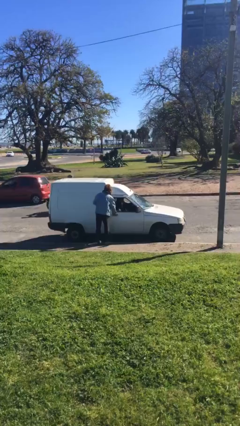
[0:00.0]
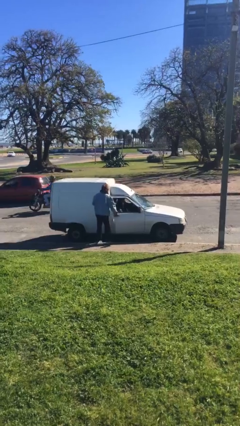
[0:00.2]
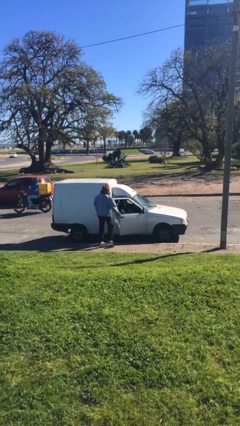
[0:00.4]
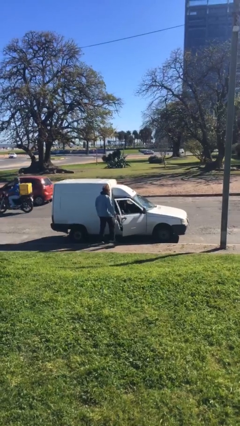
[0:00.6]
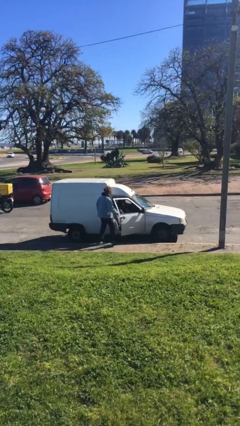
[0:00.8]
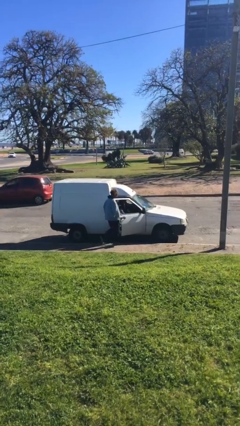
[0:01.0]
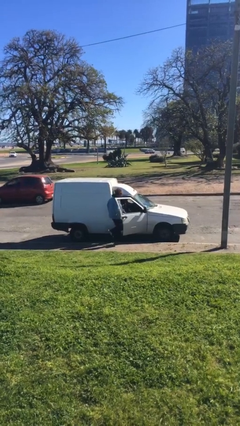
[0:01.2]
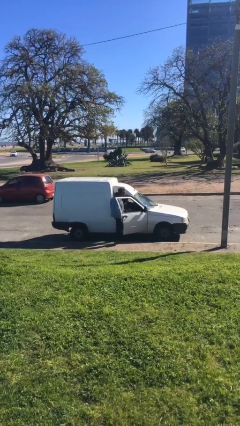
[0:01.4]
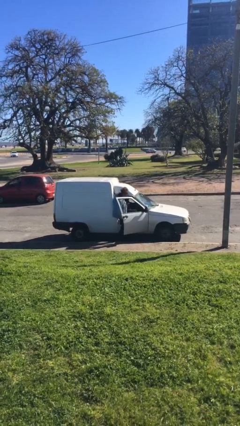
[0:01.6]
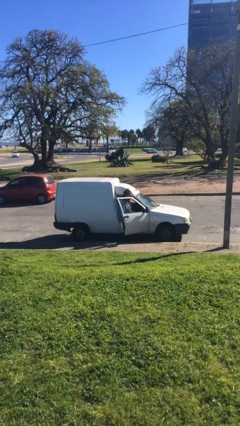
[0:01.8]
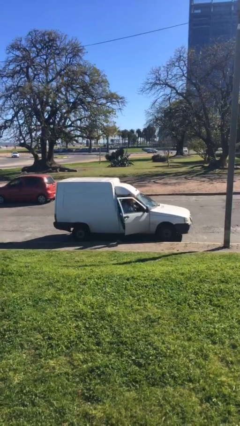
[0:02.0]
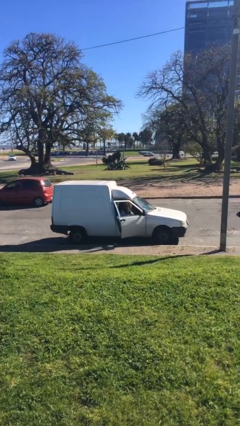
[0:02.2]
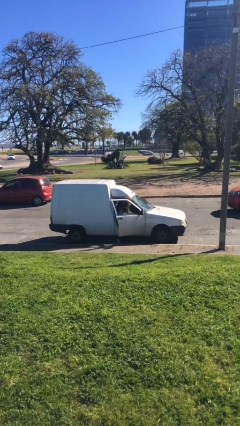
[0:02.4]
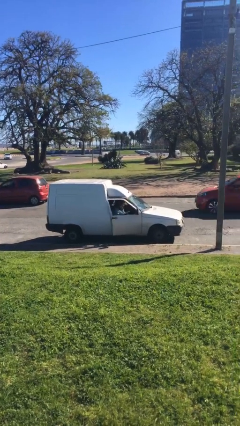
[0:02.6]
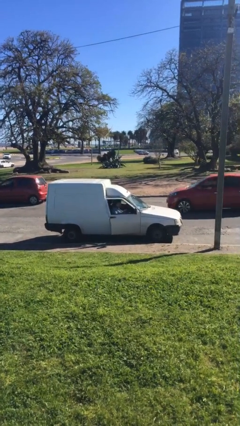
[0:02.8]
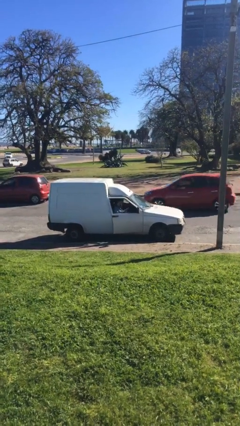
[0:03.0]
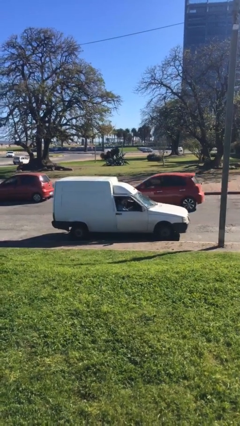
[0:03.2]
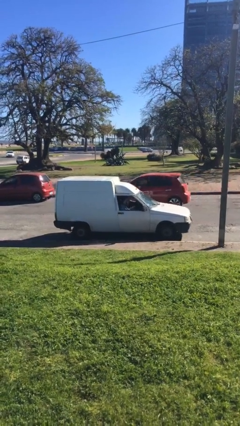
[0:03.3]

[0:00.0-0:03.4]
car picks up person

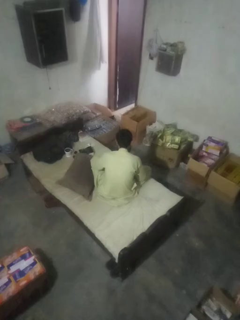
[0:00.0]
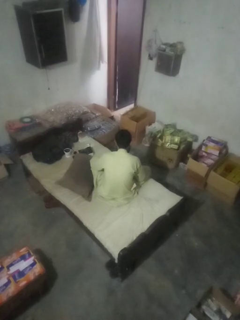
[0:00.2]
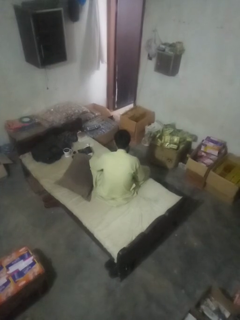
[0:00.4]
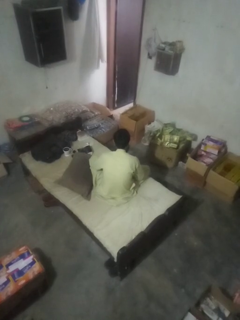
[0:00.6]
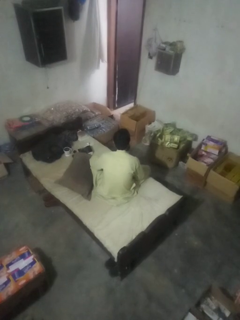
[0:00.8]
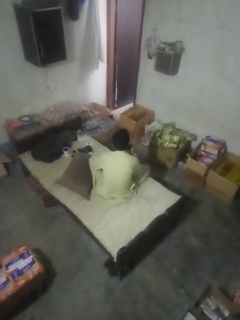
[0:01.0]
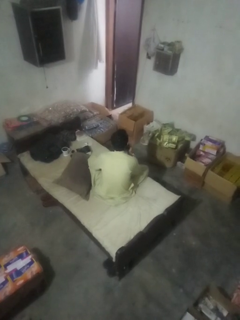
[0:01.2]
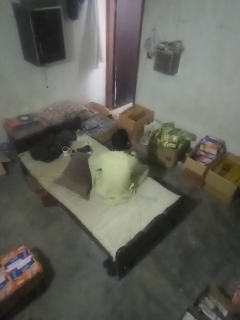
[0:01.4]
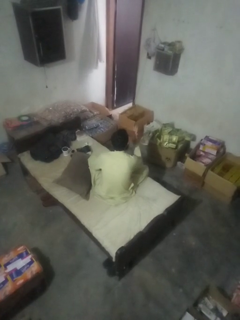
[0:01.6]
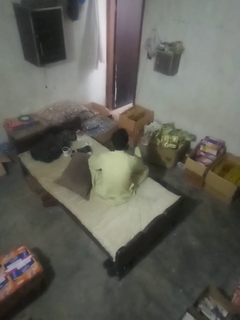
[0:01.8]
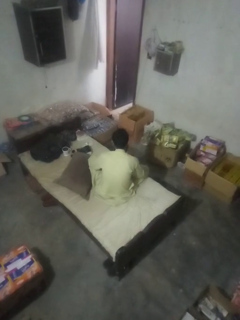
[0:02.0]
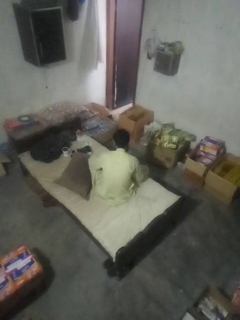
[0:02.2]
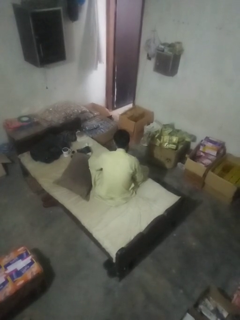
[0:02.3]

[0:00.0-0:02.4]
person gestures blow kiss

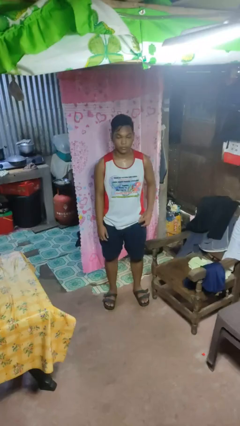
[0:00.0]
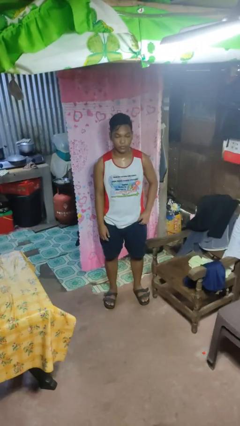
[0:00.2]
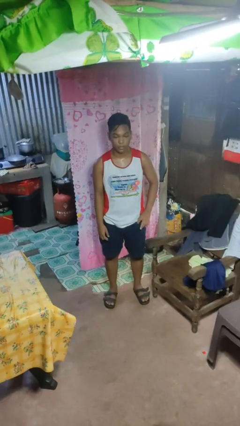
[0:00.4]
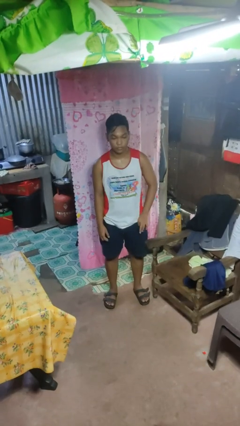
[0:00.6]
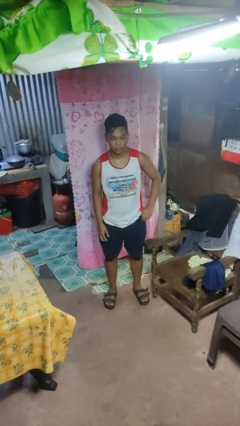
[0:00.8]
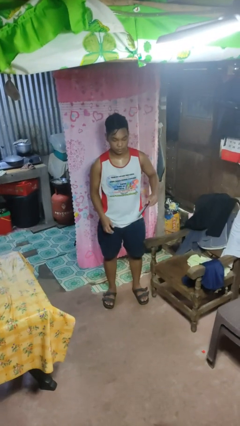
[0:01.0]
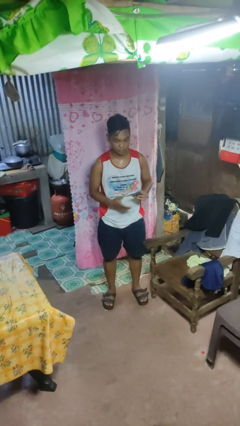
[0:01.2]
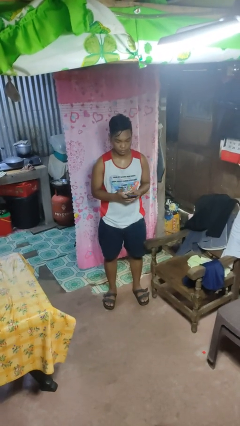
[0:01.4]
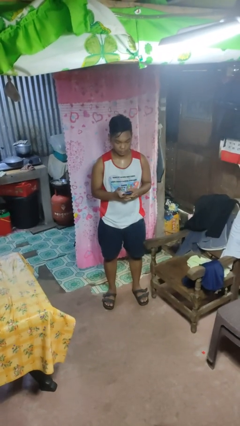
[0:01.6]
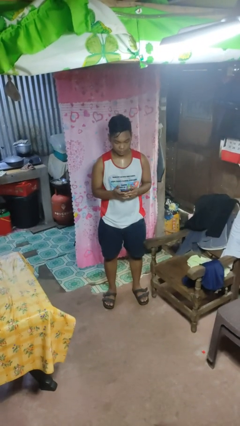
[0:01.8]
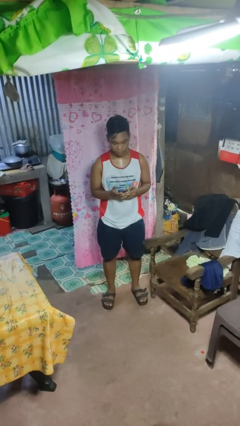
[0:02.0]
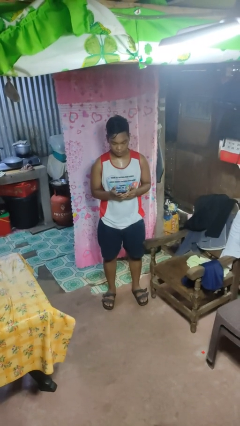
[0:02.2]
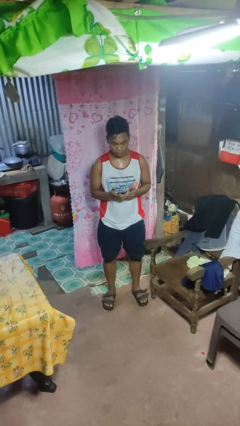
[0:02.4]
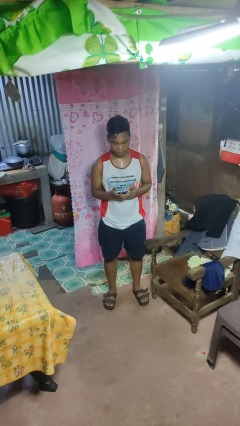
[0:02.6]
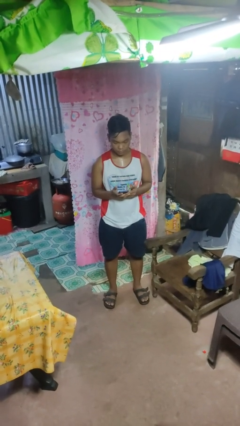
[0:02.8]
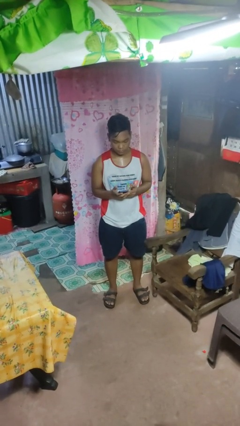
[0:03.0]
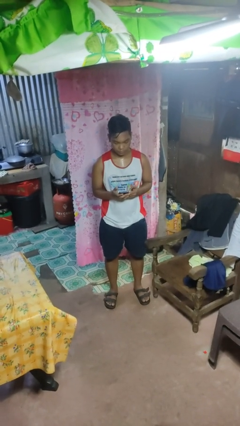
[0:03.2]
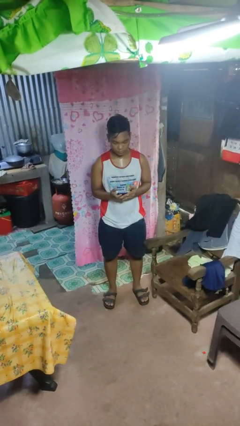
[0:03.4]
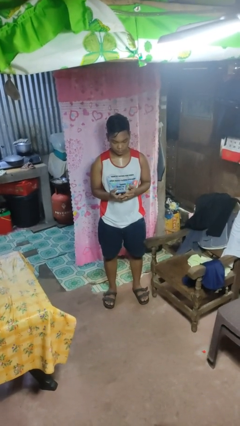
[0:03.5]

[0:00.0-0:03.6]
person takes phone from pocket

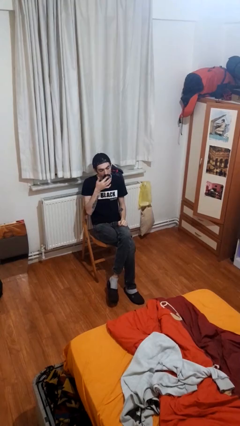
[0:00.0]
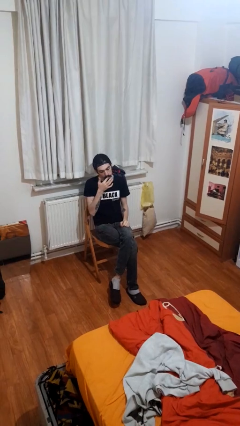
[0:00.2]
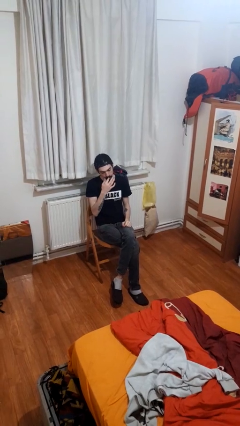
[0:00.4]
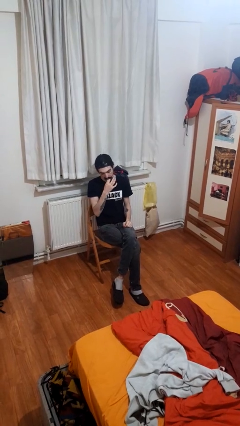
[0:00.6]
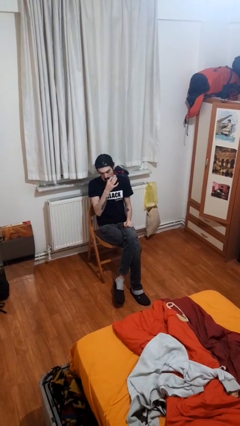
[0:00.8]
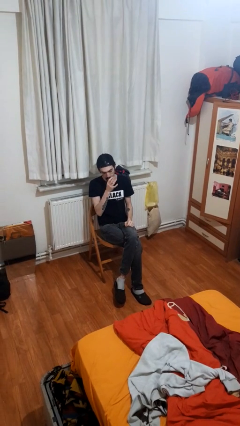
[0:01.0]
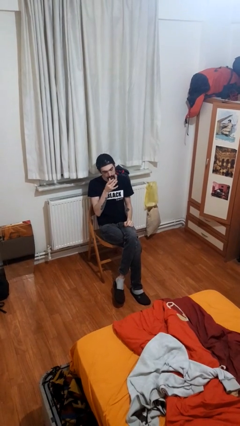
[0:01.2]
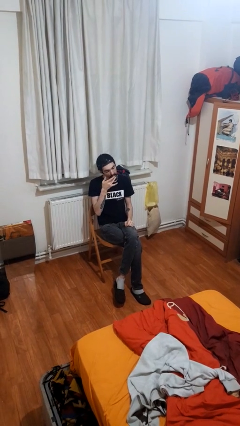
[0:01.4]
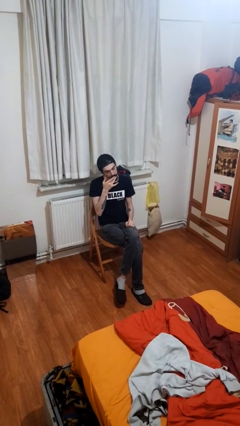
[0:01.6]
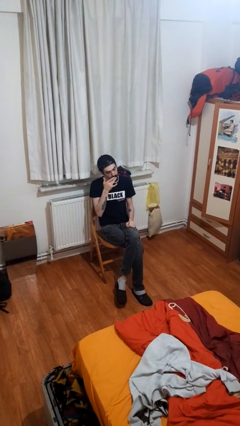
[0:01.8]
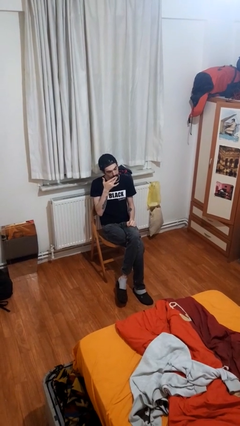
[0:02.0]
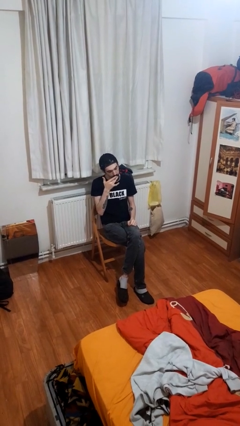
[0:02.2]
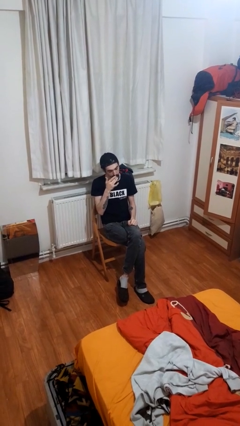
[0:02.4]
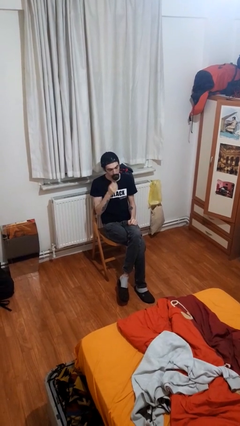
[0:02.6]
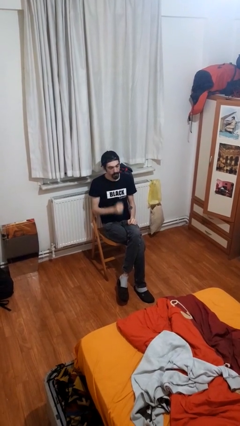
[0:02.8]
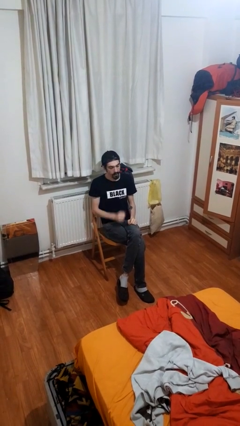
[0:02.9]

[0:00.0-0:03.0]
person licks fingers

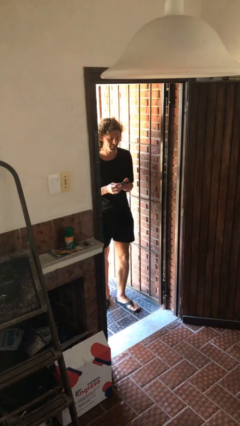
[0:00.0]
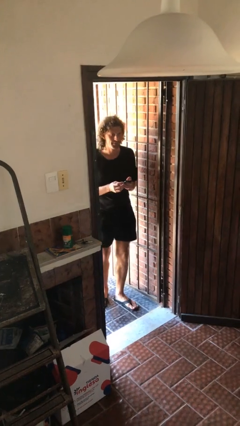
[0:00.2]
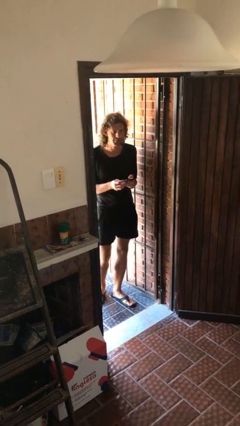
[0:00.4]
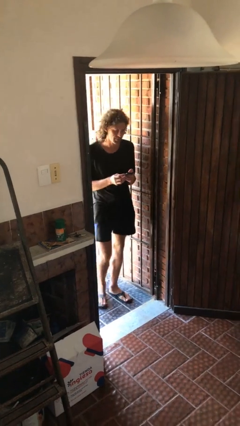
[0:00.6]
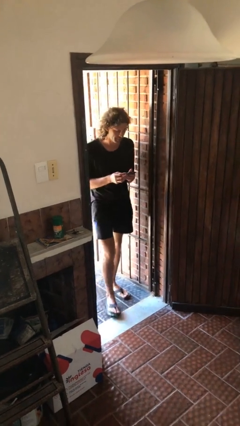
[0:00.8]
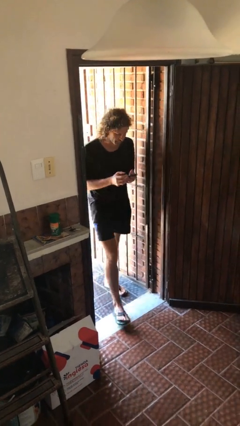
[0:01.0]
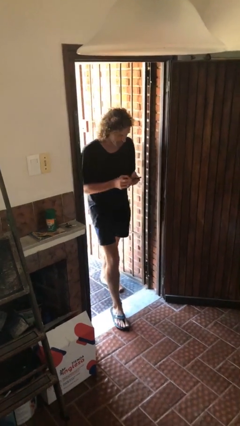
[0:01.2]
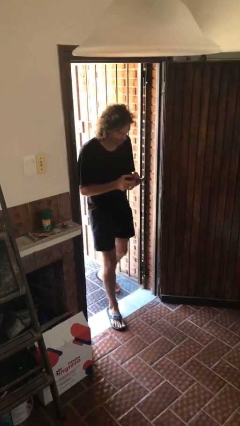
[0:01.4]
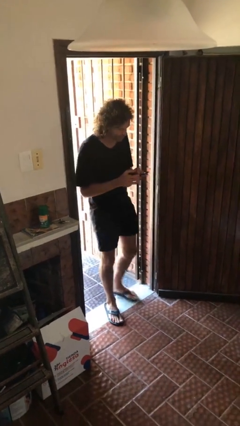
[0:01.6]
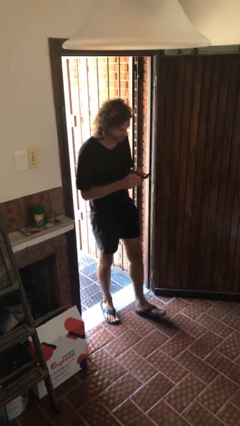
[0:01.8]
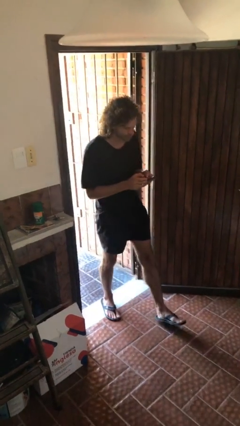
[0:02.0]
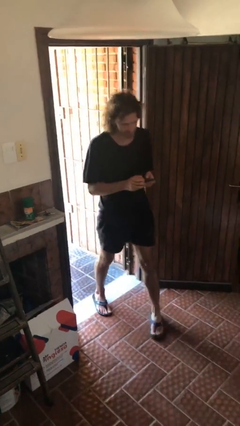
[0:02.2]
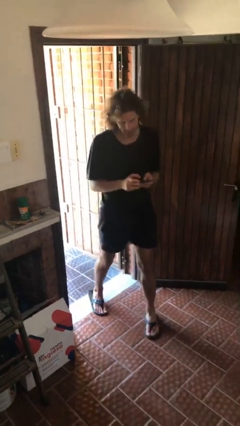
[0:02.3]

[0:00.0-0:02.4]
person enters scene through structure

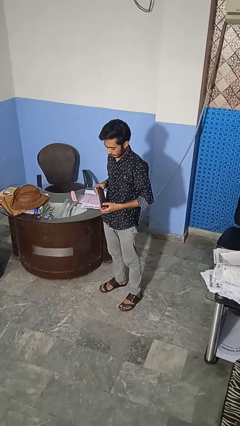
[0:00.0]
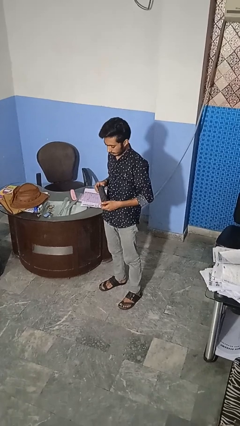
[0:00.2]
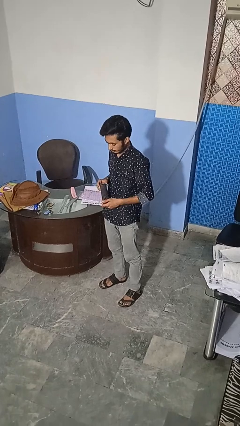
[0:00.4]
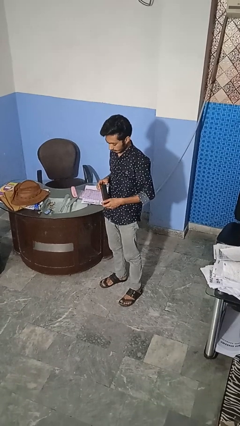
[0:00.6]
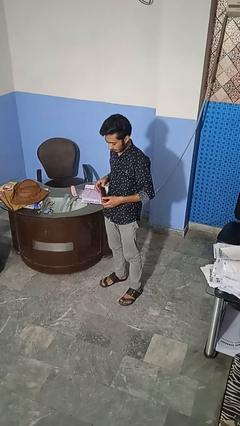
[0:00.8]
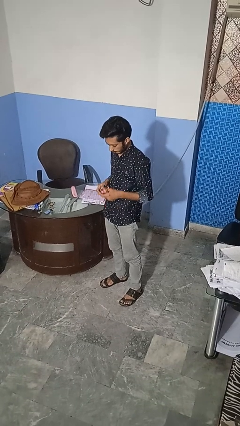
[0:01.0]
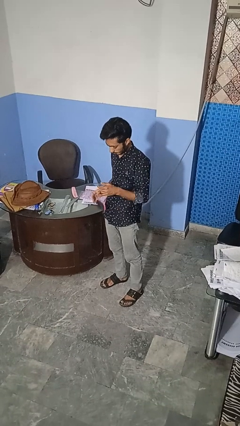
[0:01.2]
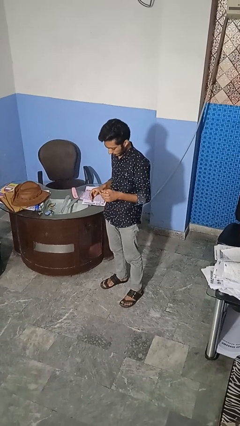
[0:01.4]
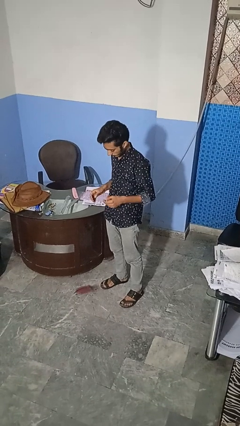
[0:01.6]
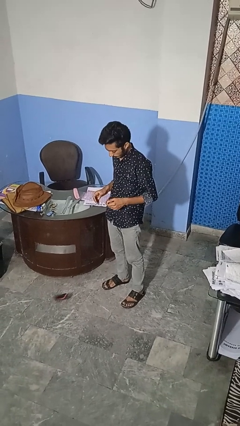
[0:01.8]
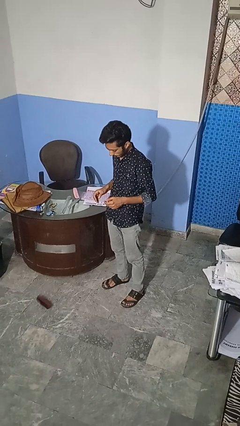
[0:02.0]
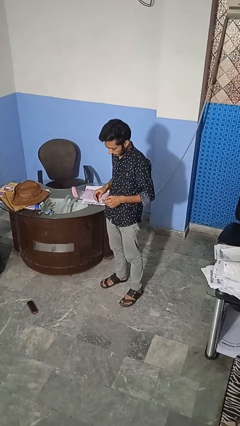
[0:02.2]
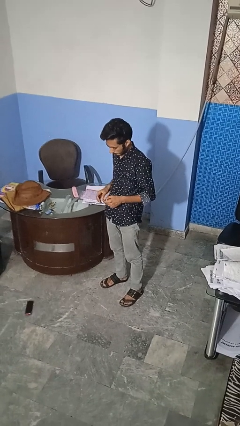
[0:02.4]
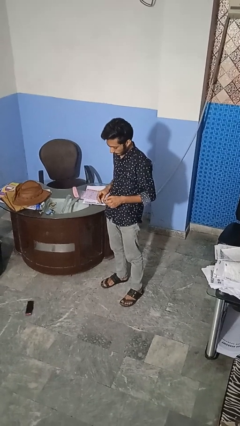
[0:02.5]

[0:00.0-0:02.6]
person drops object

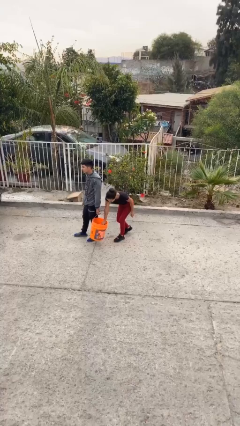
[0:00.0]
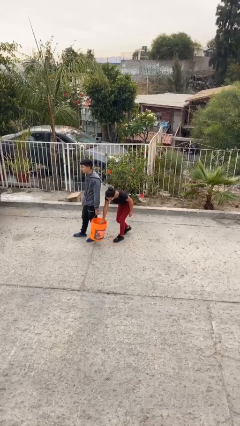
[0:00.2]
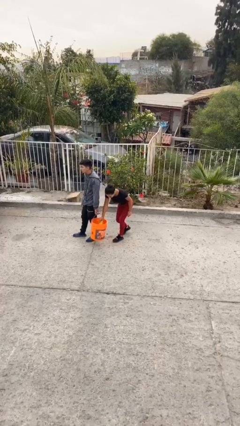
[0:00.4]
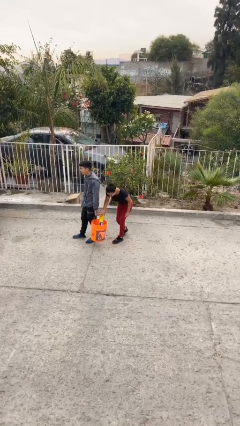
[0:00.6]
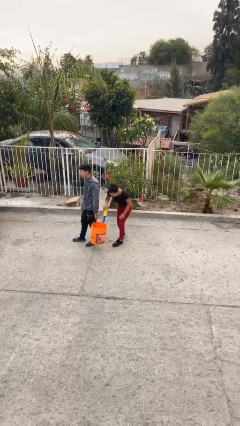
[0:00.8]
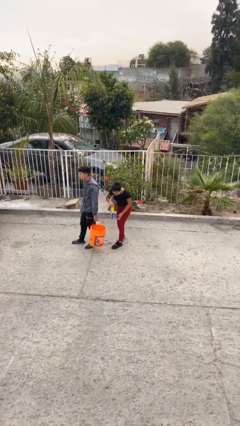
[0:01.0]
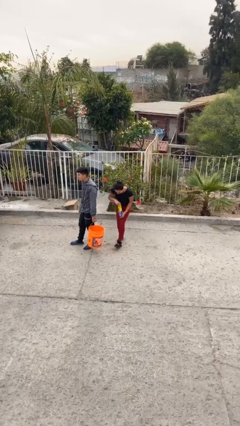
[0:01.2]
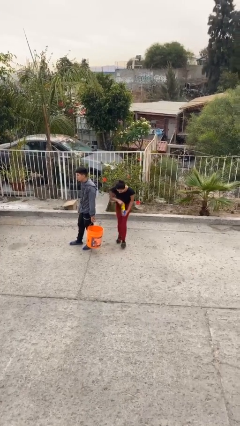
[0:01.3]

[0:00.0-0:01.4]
person steals object from person
